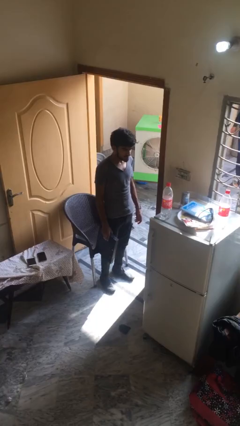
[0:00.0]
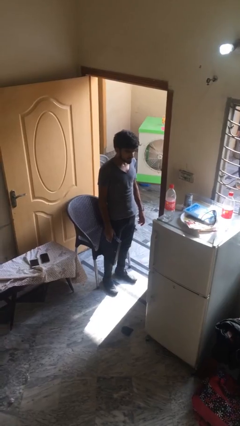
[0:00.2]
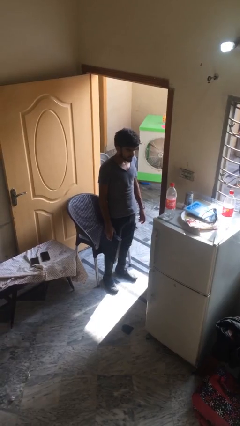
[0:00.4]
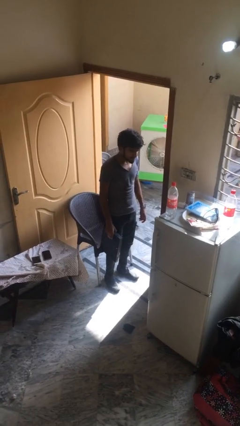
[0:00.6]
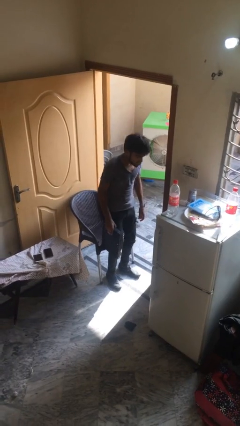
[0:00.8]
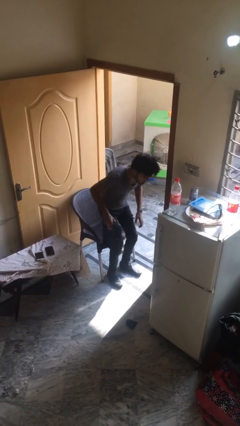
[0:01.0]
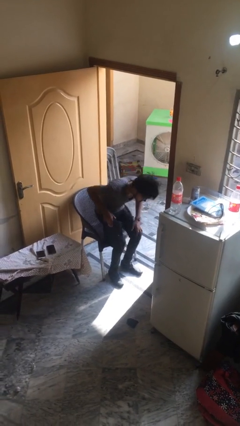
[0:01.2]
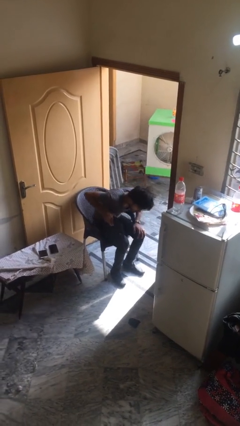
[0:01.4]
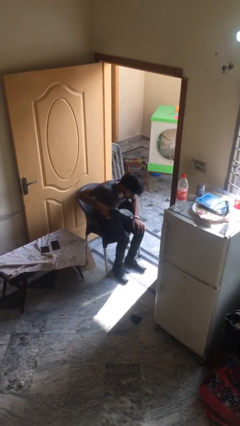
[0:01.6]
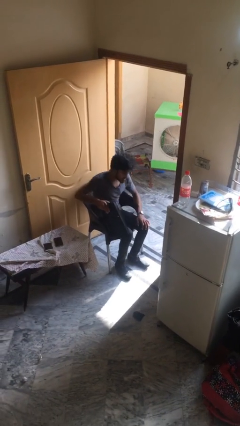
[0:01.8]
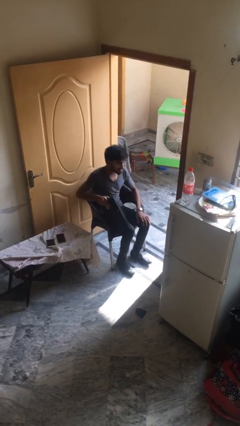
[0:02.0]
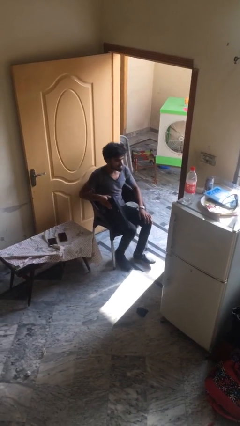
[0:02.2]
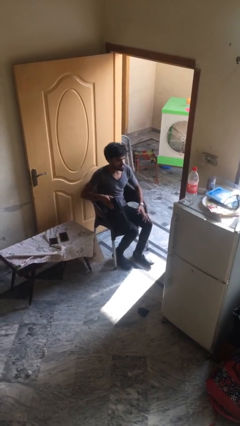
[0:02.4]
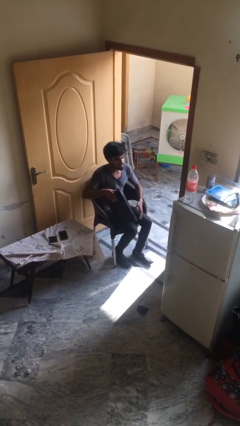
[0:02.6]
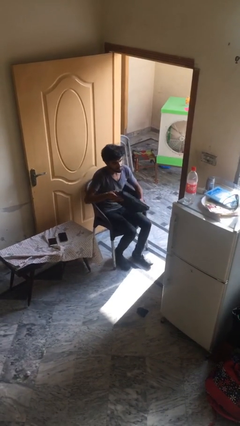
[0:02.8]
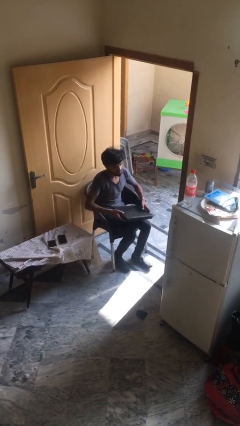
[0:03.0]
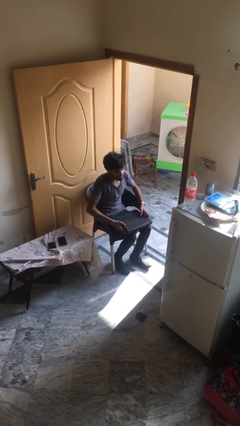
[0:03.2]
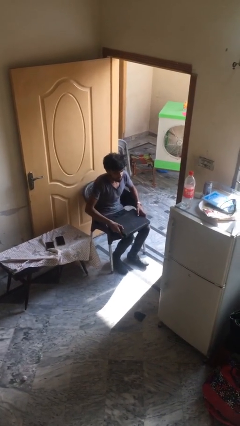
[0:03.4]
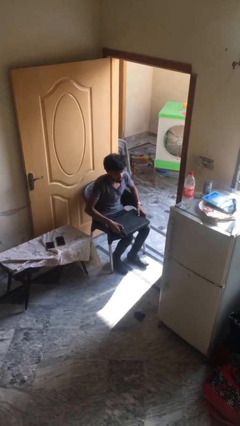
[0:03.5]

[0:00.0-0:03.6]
person sits down

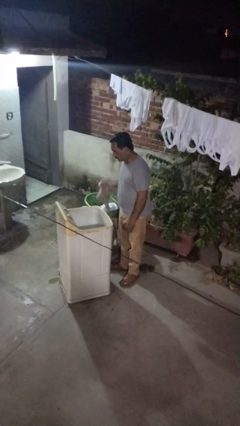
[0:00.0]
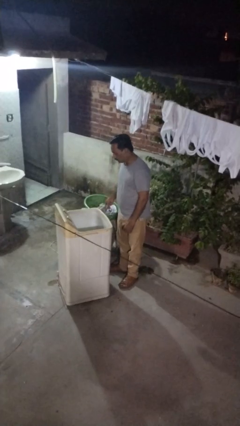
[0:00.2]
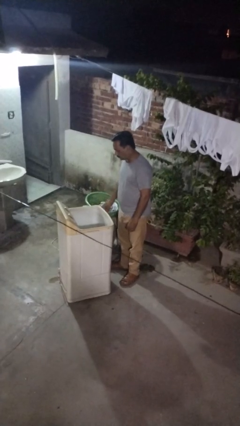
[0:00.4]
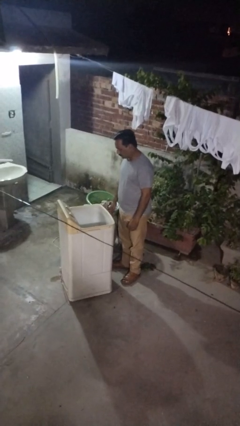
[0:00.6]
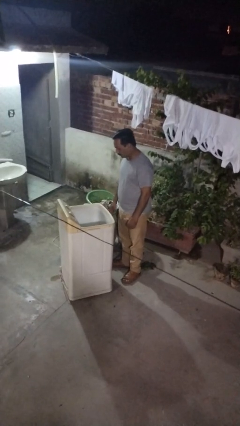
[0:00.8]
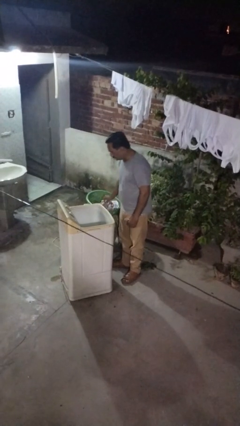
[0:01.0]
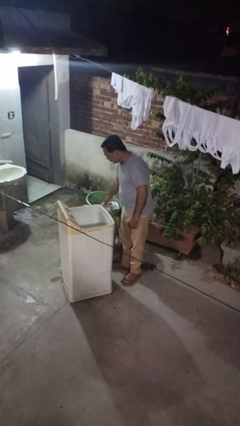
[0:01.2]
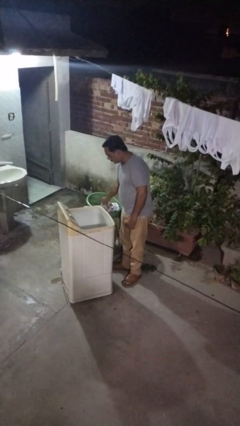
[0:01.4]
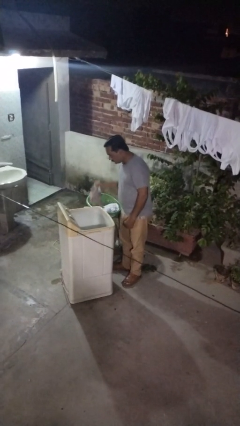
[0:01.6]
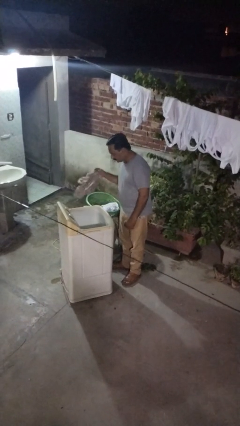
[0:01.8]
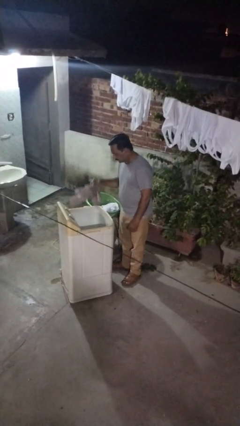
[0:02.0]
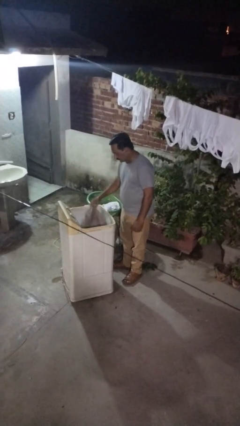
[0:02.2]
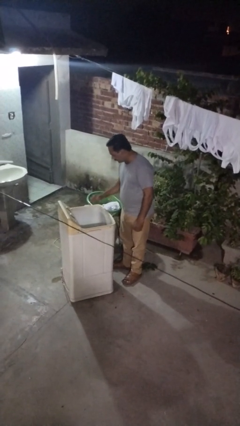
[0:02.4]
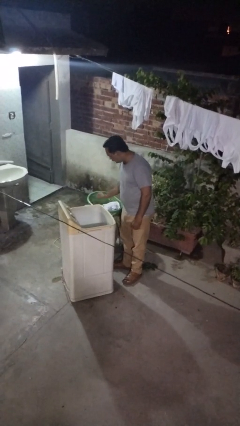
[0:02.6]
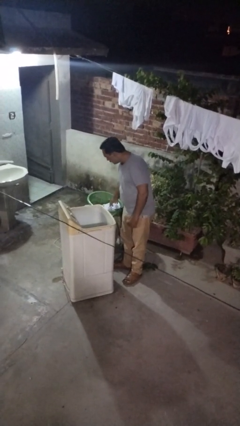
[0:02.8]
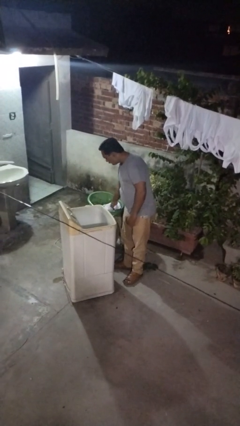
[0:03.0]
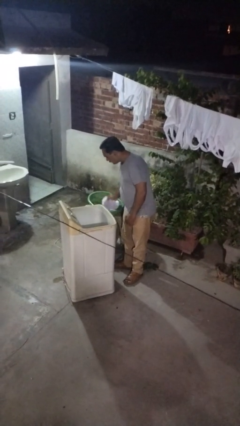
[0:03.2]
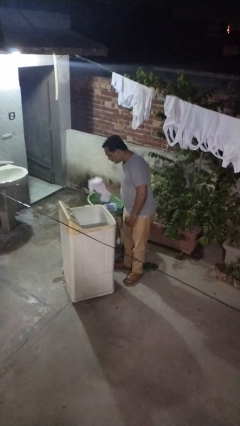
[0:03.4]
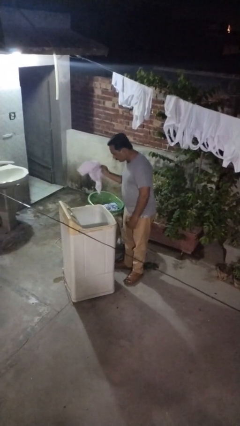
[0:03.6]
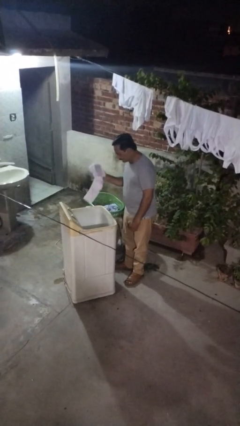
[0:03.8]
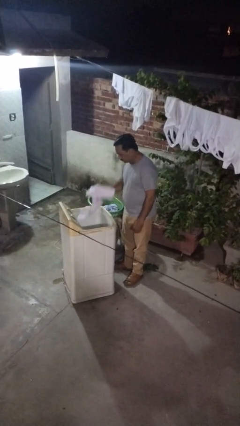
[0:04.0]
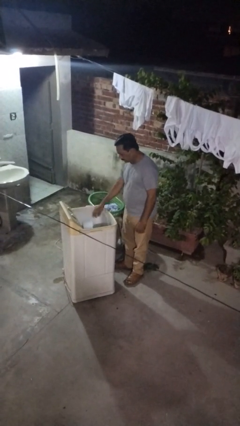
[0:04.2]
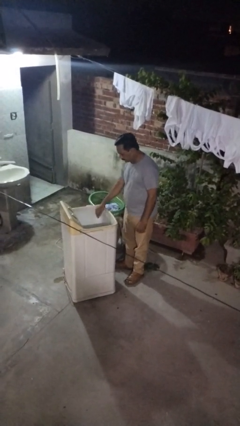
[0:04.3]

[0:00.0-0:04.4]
person unloads clotheswasher

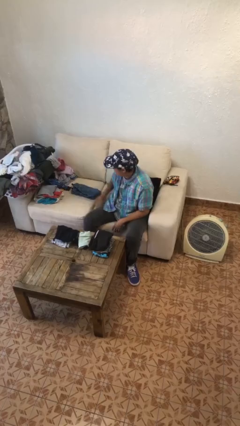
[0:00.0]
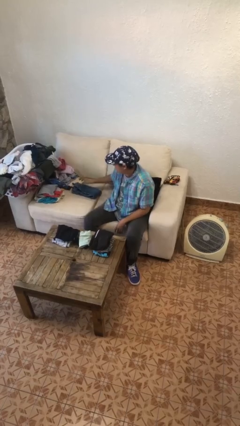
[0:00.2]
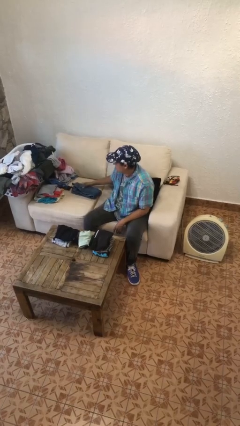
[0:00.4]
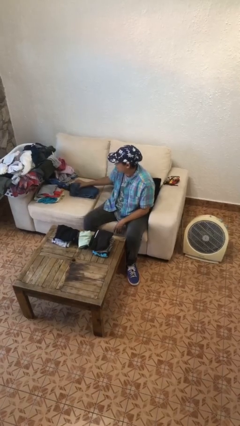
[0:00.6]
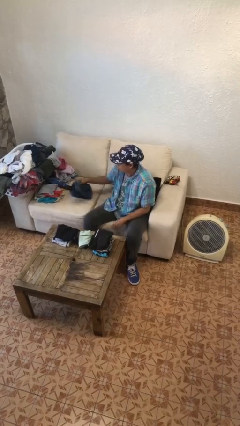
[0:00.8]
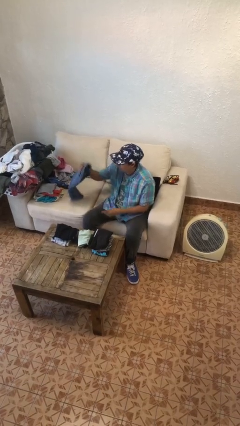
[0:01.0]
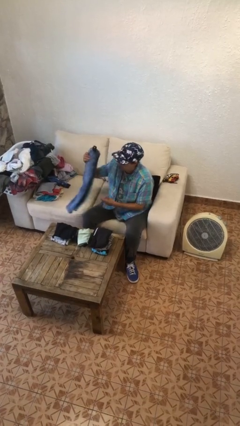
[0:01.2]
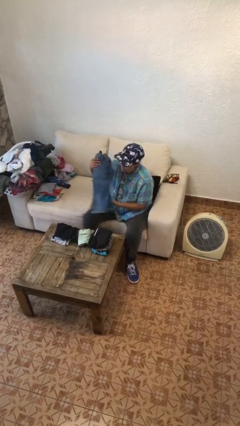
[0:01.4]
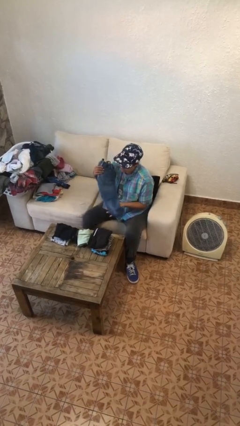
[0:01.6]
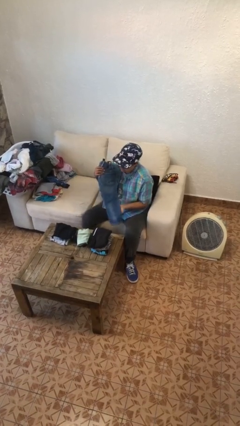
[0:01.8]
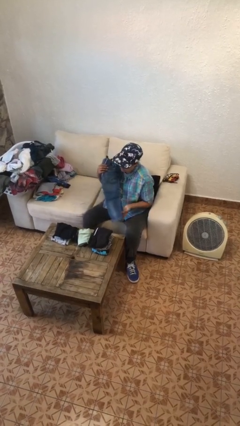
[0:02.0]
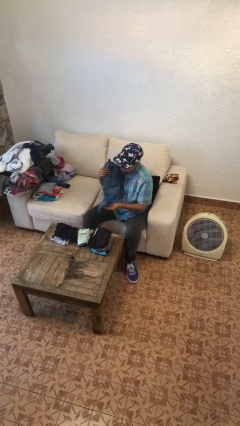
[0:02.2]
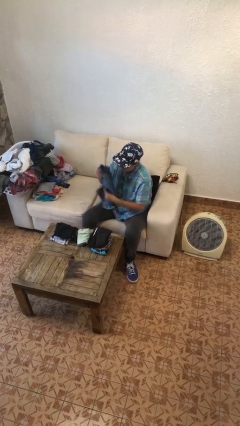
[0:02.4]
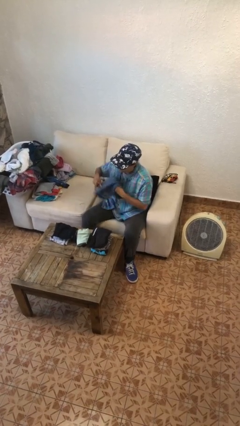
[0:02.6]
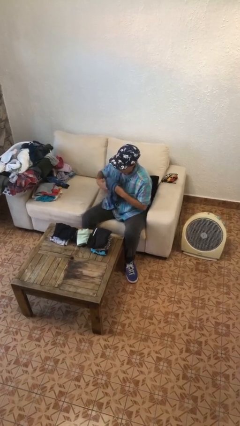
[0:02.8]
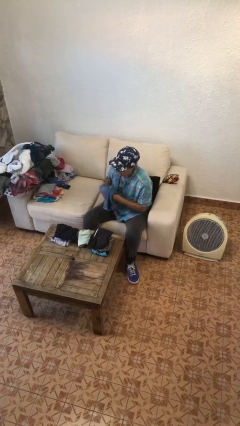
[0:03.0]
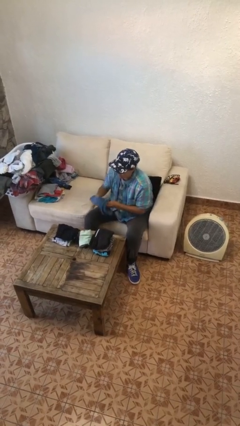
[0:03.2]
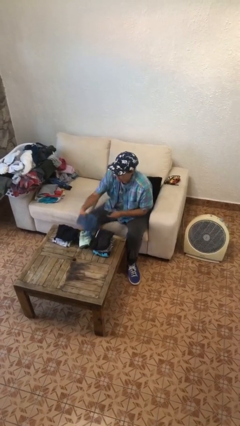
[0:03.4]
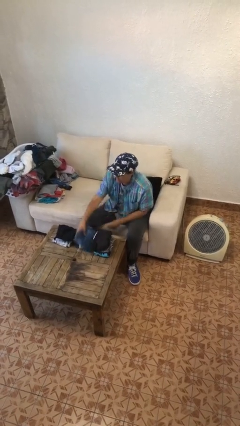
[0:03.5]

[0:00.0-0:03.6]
person folds pants

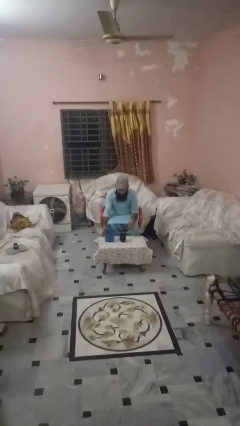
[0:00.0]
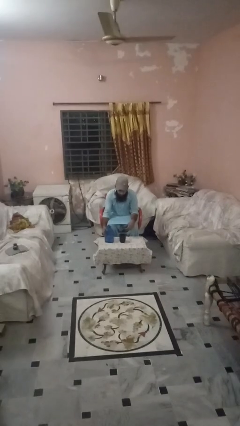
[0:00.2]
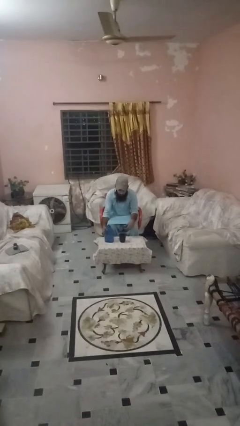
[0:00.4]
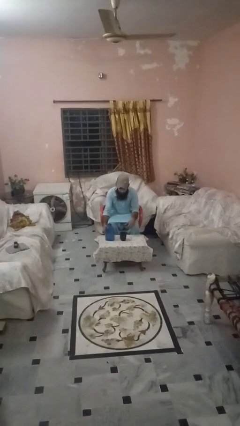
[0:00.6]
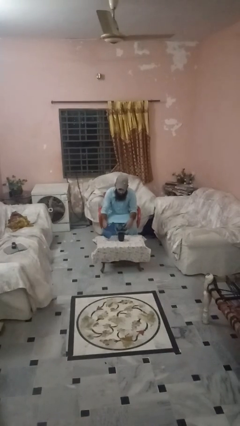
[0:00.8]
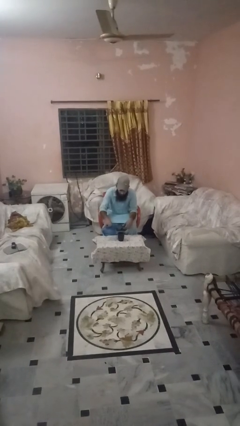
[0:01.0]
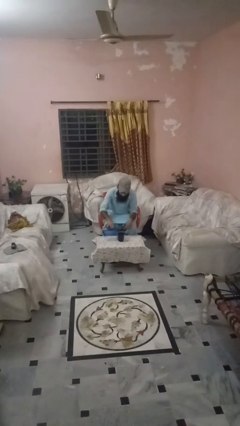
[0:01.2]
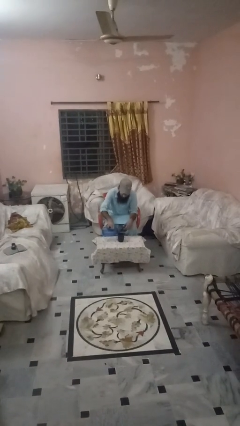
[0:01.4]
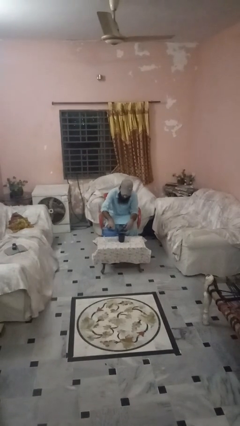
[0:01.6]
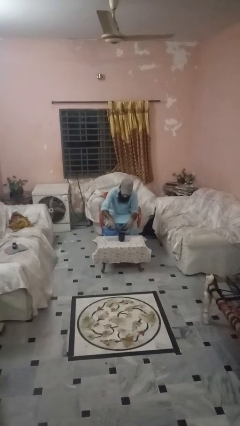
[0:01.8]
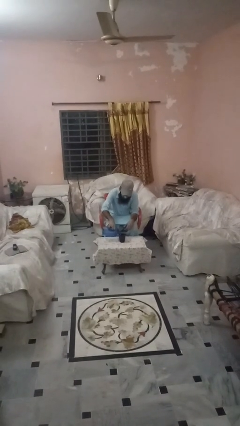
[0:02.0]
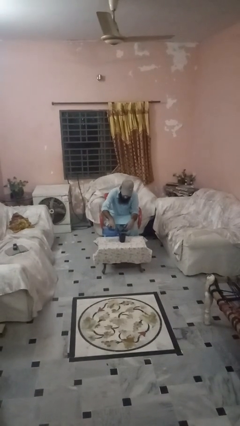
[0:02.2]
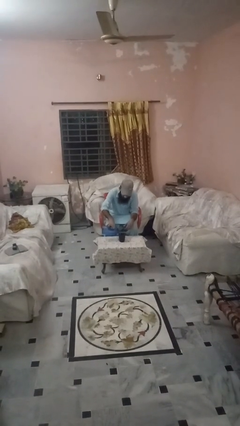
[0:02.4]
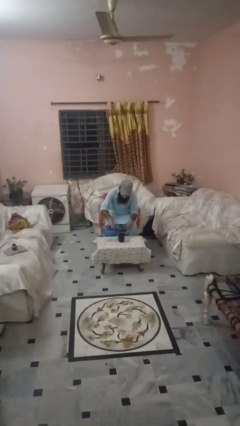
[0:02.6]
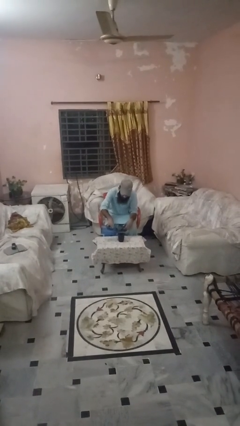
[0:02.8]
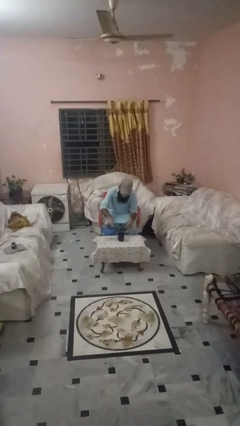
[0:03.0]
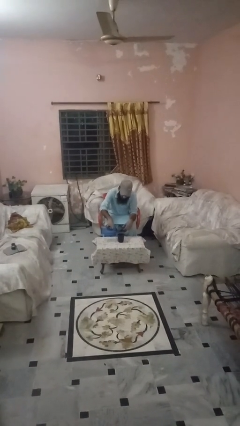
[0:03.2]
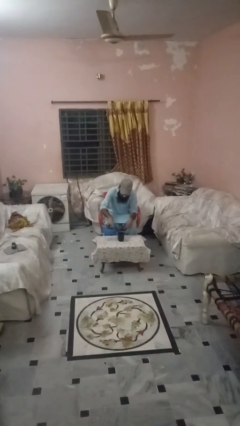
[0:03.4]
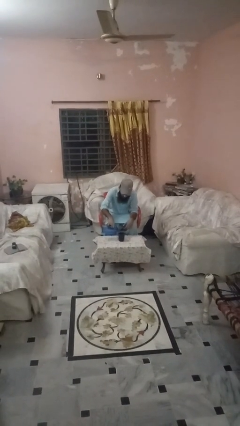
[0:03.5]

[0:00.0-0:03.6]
person pours liquid into cup

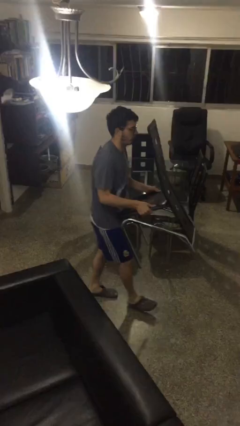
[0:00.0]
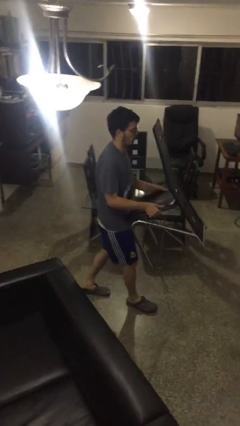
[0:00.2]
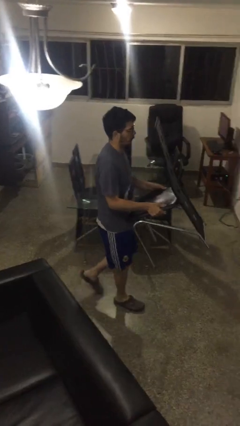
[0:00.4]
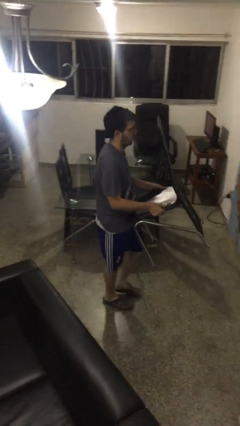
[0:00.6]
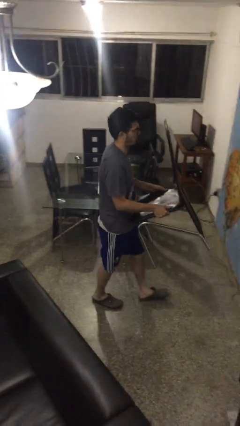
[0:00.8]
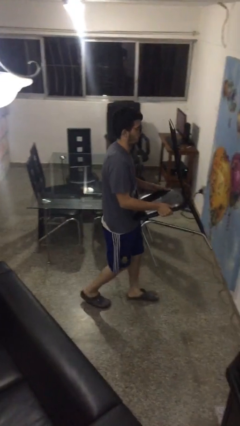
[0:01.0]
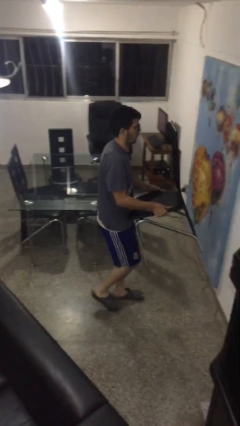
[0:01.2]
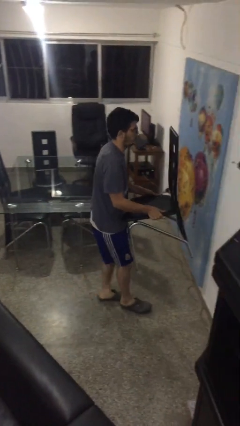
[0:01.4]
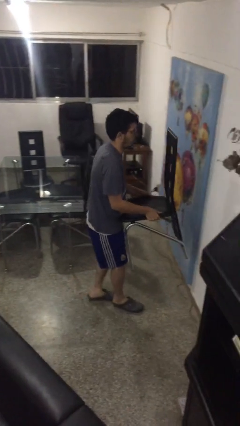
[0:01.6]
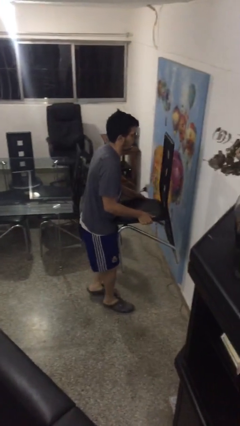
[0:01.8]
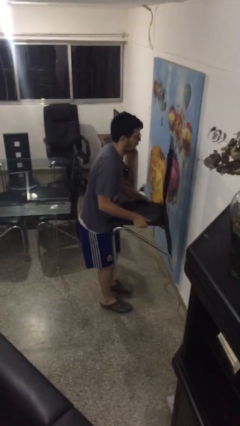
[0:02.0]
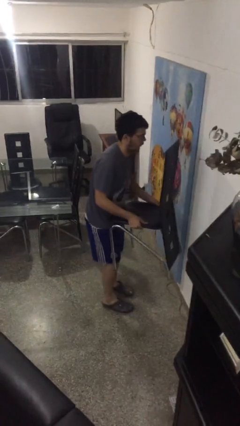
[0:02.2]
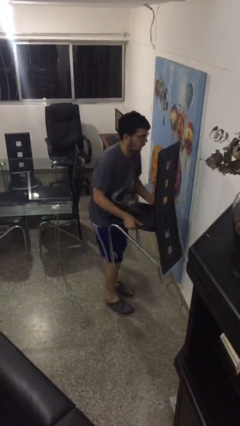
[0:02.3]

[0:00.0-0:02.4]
person carries furniture

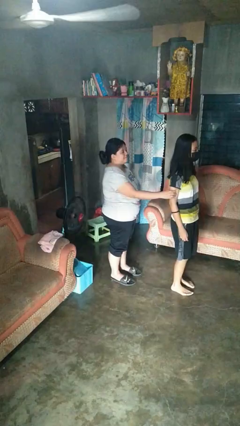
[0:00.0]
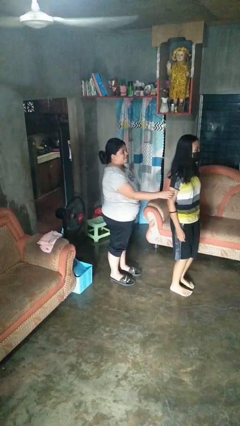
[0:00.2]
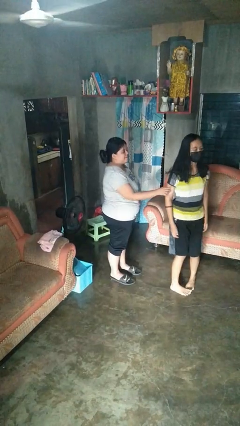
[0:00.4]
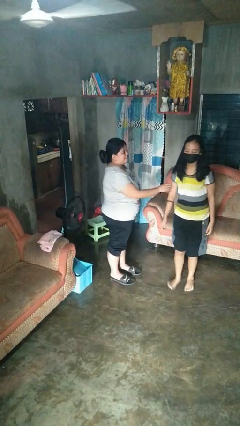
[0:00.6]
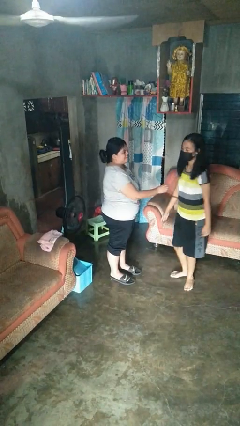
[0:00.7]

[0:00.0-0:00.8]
person spins person around
